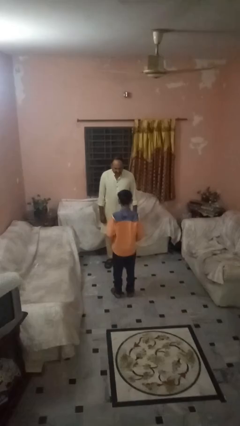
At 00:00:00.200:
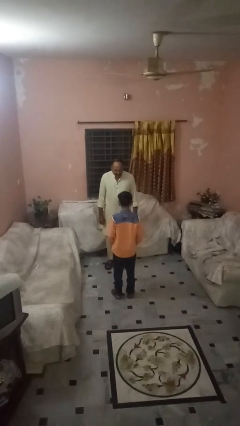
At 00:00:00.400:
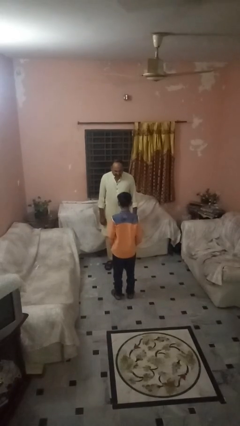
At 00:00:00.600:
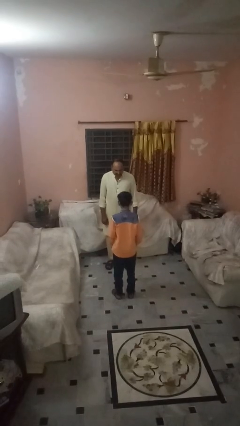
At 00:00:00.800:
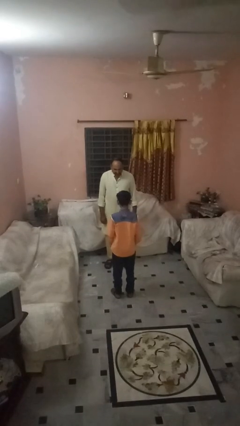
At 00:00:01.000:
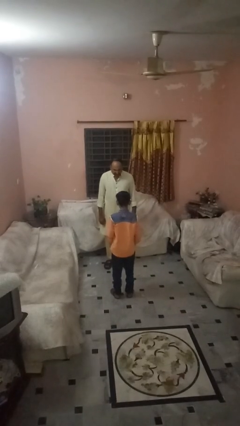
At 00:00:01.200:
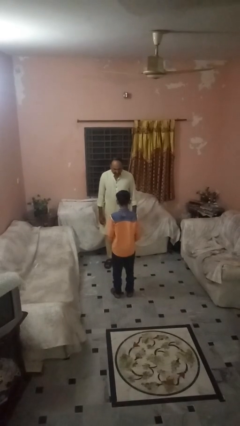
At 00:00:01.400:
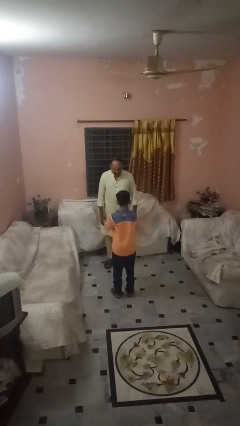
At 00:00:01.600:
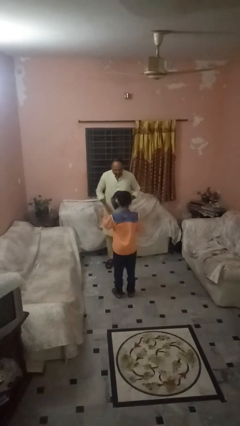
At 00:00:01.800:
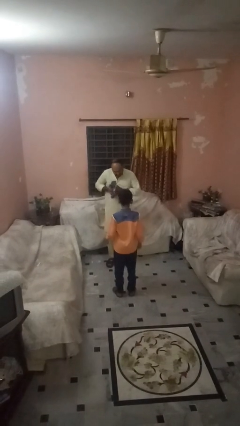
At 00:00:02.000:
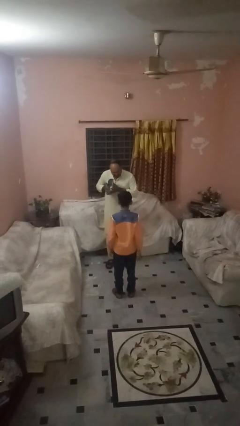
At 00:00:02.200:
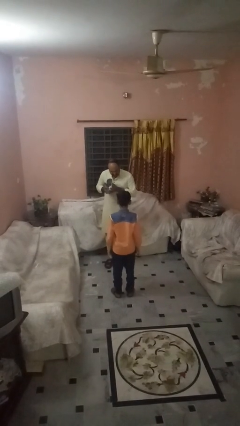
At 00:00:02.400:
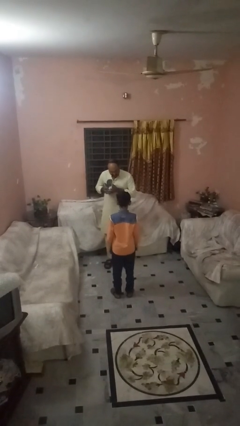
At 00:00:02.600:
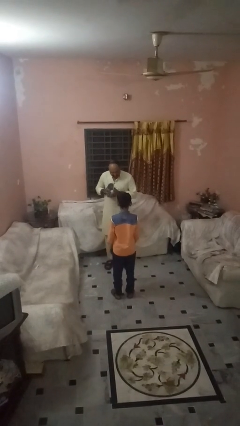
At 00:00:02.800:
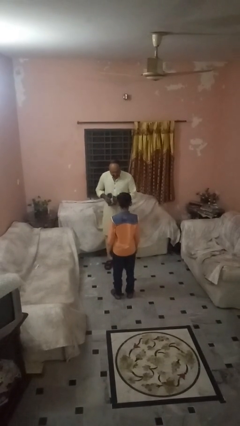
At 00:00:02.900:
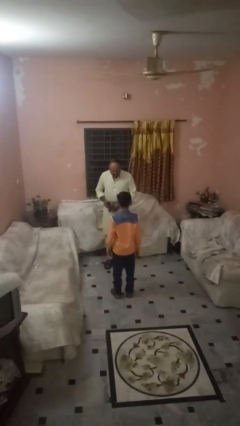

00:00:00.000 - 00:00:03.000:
person catches object from person

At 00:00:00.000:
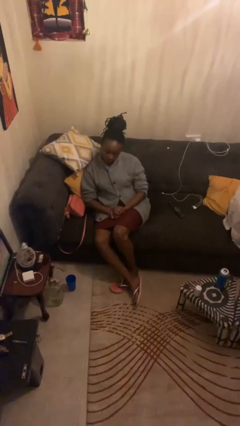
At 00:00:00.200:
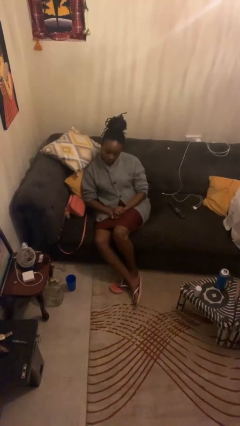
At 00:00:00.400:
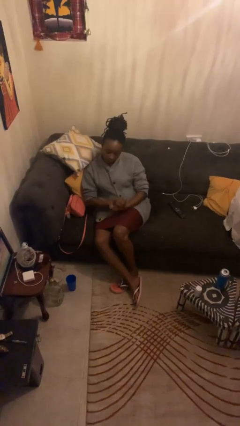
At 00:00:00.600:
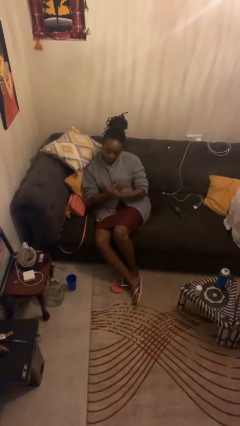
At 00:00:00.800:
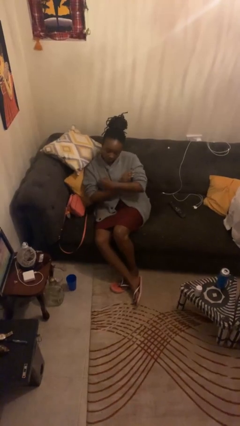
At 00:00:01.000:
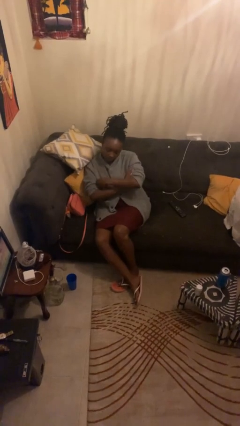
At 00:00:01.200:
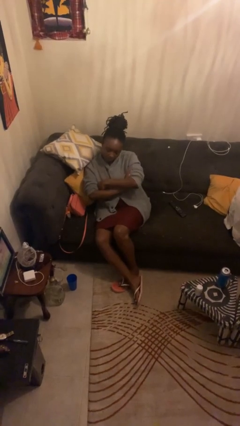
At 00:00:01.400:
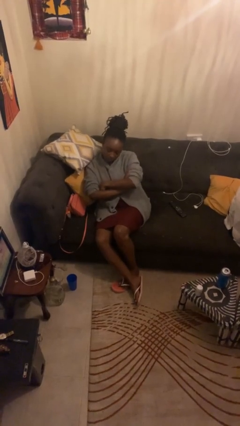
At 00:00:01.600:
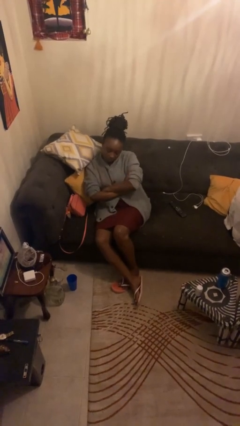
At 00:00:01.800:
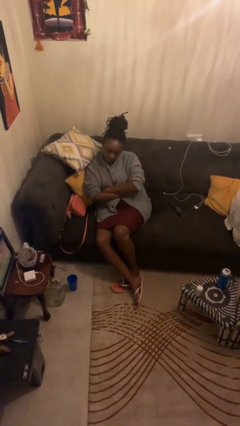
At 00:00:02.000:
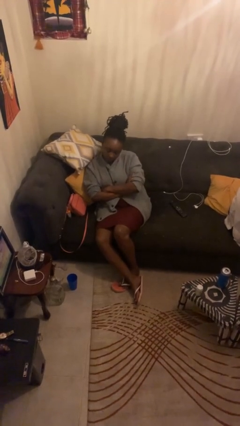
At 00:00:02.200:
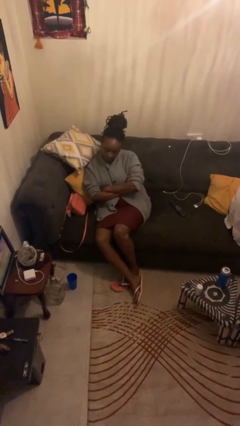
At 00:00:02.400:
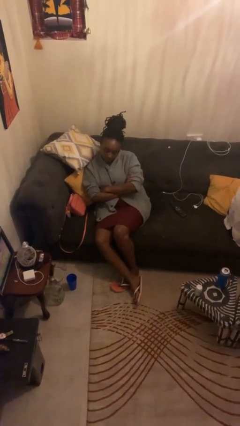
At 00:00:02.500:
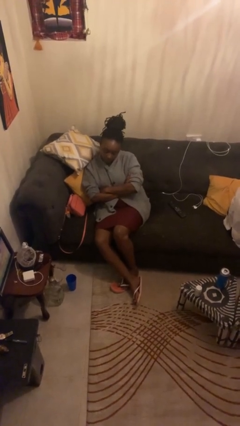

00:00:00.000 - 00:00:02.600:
person crosses arms

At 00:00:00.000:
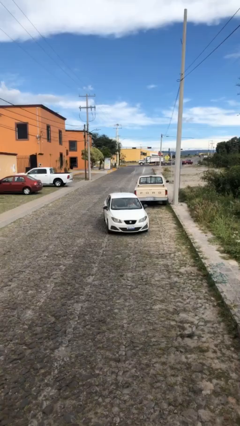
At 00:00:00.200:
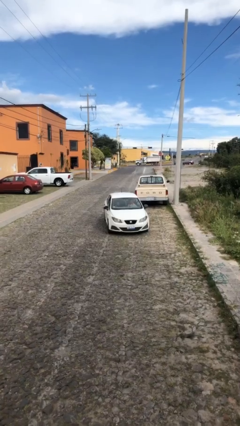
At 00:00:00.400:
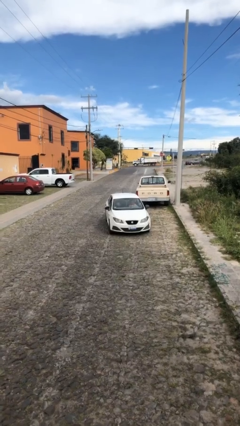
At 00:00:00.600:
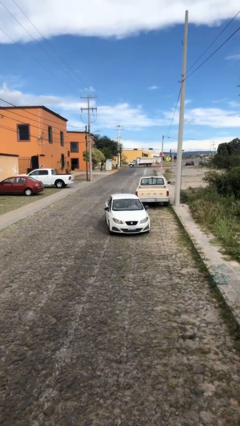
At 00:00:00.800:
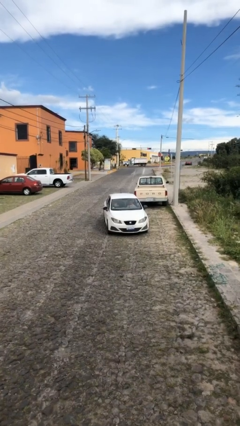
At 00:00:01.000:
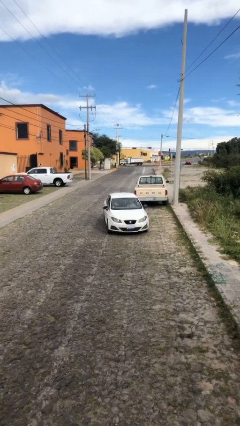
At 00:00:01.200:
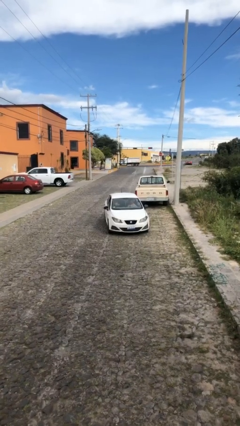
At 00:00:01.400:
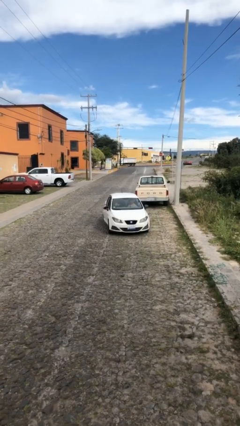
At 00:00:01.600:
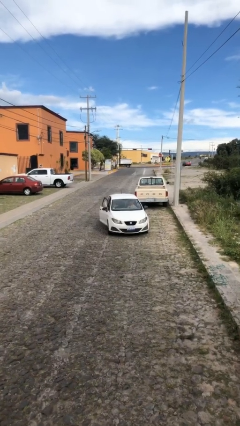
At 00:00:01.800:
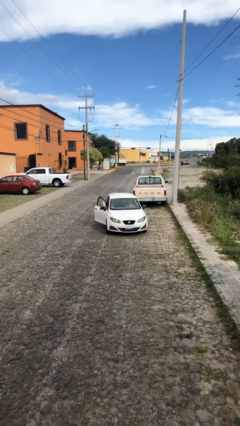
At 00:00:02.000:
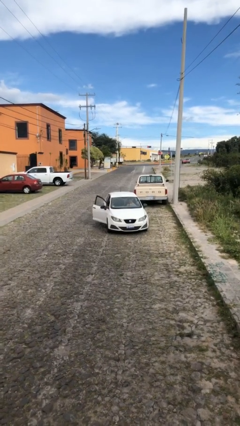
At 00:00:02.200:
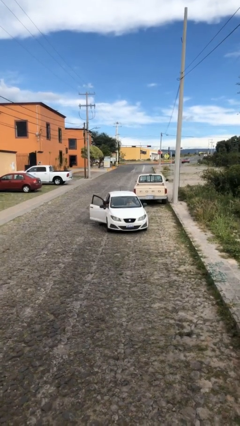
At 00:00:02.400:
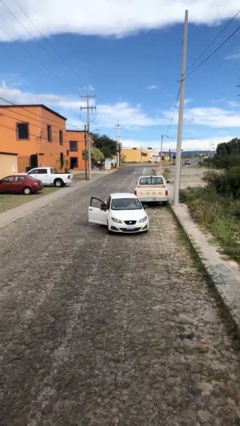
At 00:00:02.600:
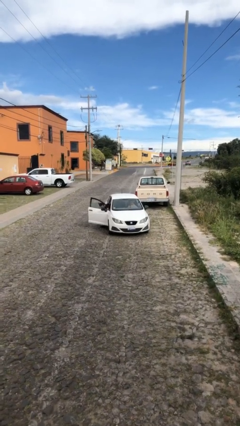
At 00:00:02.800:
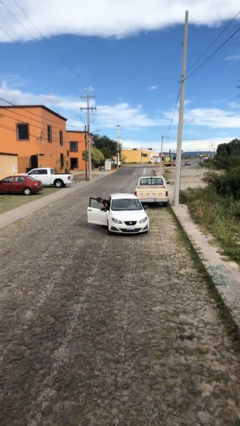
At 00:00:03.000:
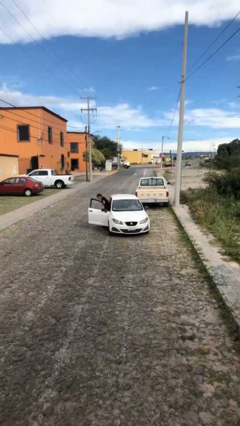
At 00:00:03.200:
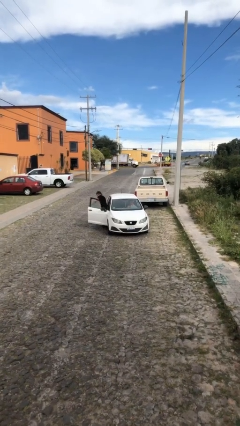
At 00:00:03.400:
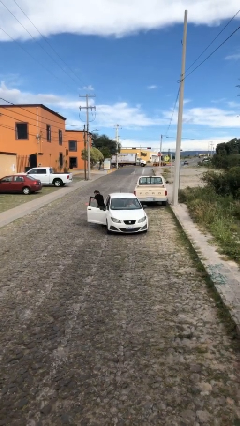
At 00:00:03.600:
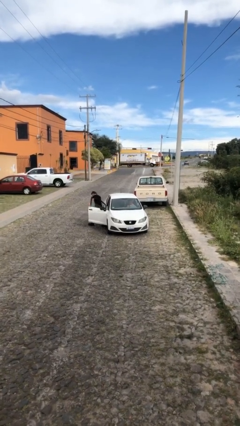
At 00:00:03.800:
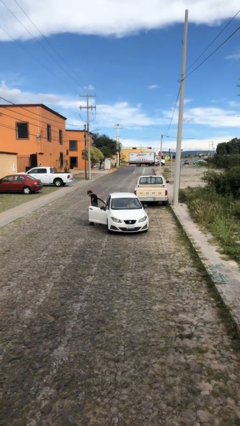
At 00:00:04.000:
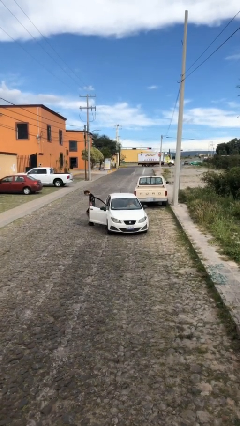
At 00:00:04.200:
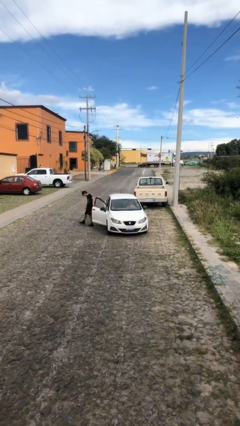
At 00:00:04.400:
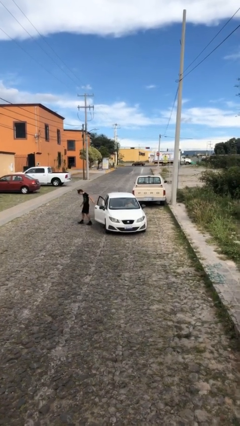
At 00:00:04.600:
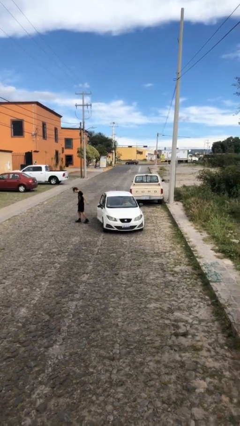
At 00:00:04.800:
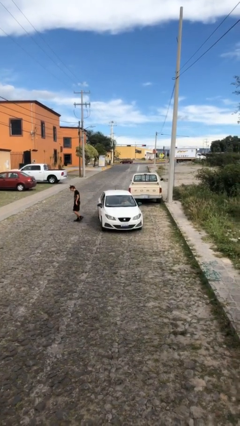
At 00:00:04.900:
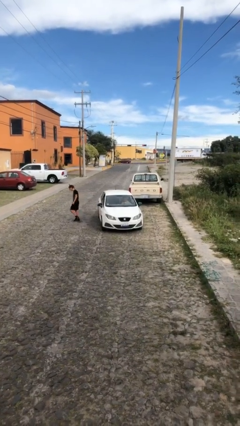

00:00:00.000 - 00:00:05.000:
car drops off person

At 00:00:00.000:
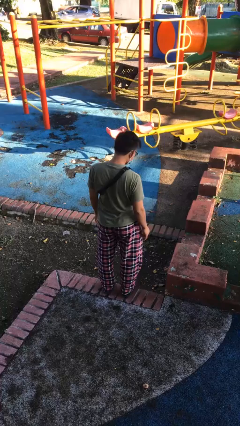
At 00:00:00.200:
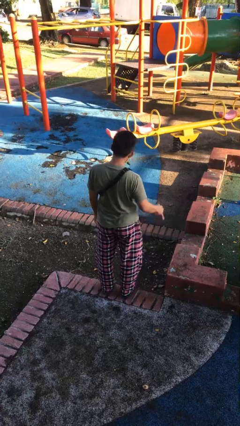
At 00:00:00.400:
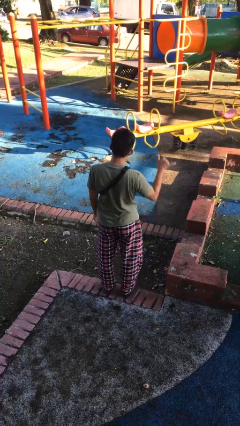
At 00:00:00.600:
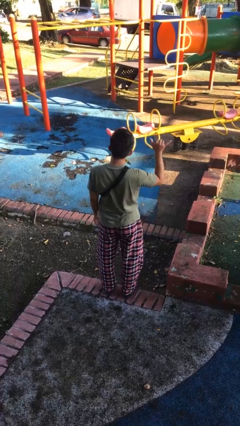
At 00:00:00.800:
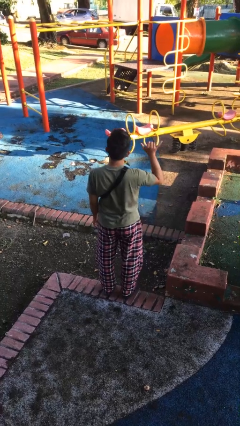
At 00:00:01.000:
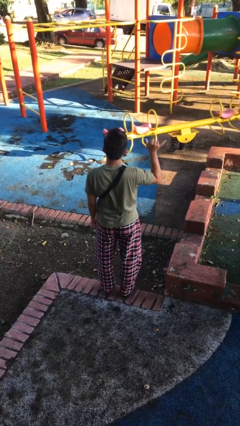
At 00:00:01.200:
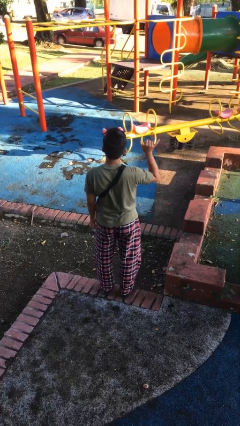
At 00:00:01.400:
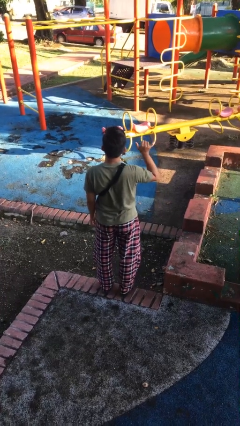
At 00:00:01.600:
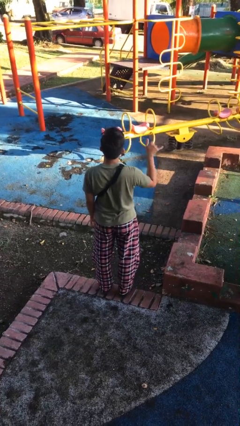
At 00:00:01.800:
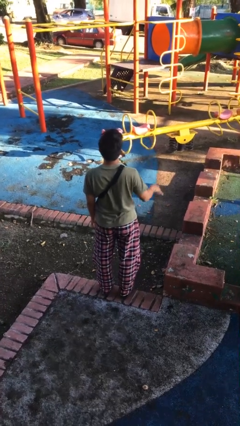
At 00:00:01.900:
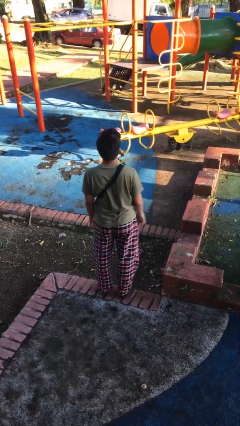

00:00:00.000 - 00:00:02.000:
person gestures hang loose

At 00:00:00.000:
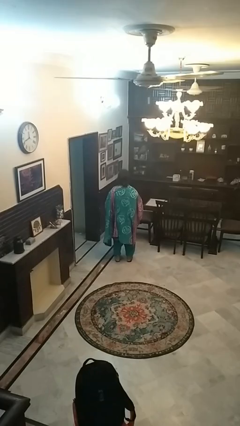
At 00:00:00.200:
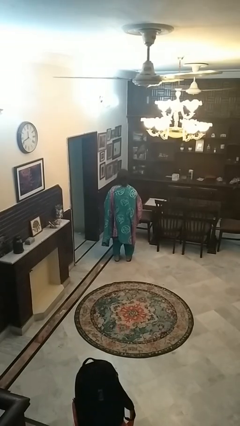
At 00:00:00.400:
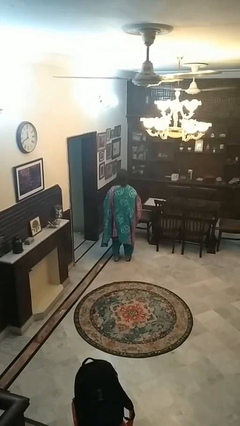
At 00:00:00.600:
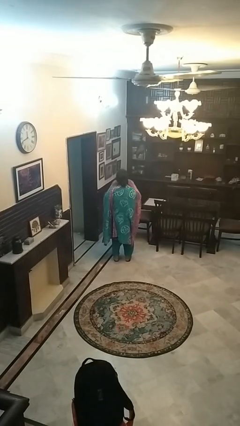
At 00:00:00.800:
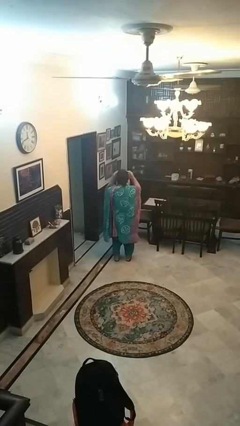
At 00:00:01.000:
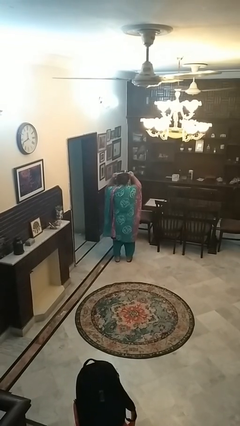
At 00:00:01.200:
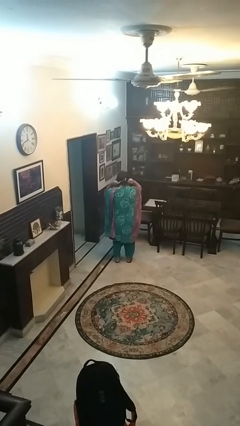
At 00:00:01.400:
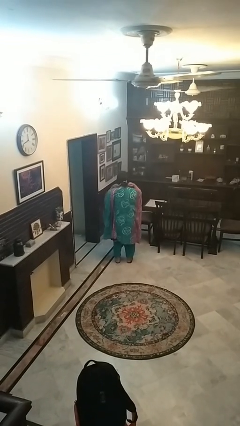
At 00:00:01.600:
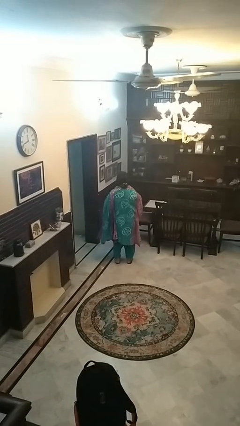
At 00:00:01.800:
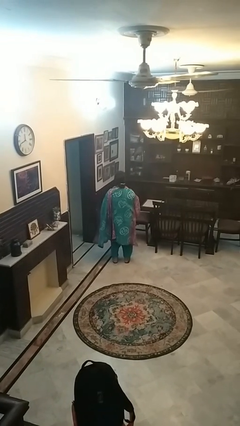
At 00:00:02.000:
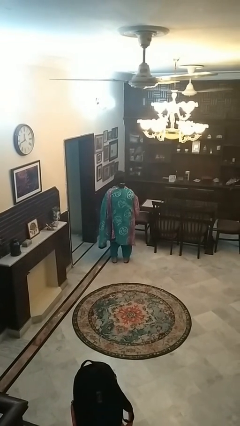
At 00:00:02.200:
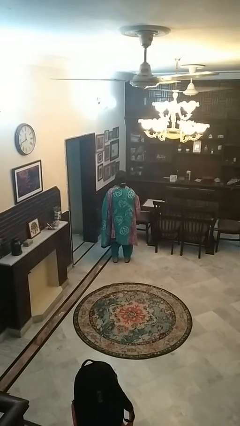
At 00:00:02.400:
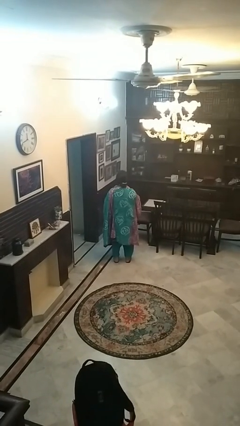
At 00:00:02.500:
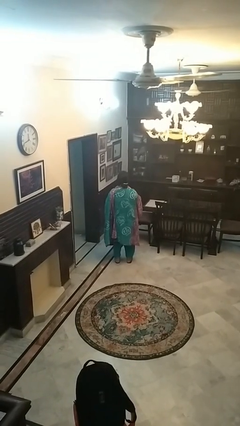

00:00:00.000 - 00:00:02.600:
person puts on apron

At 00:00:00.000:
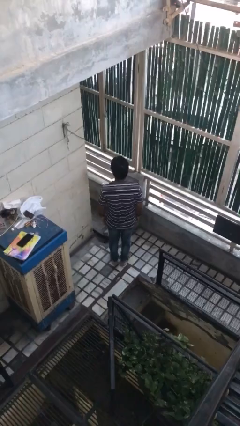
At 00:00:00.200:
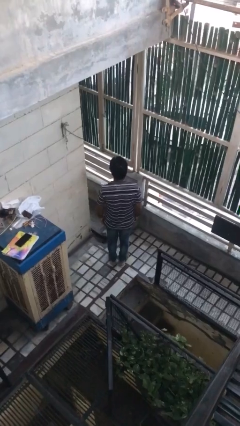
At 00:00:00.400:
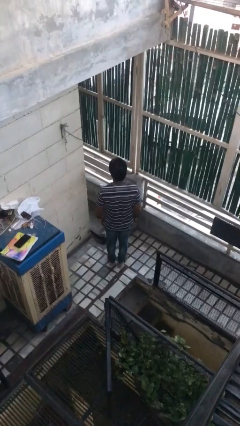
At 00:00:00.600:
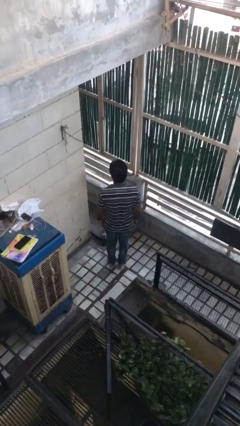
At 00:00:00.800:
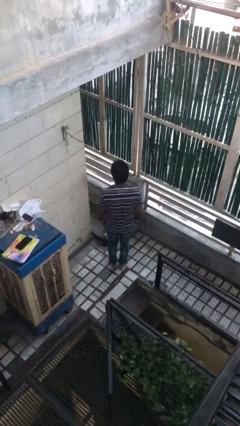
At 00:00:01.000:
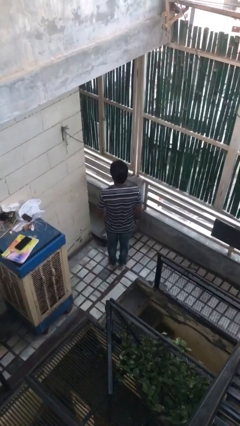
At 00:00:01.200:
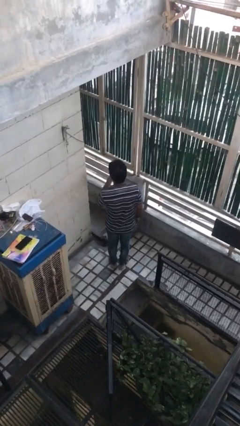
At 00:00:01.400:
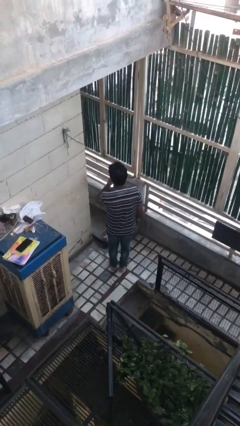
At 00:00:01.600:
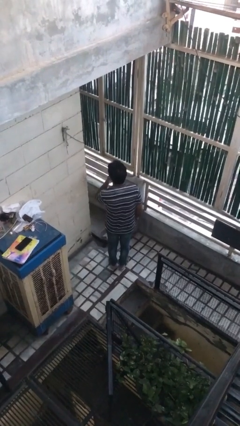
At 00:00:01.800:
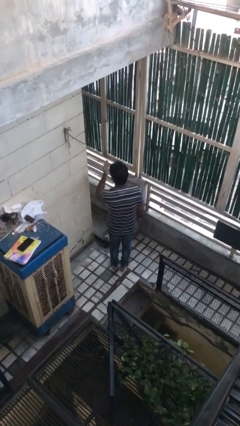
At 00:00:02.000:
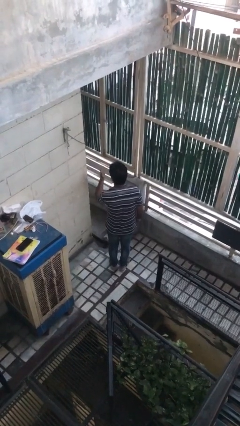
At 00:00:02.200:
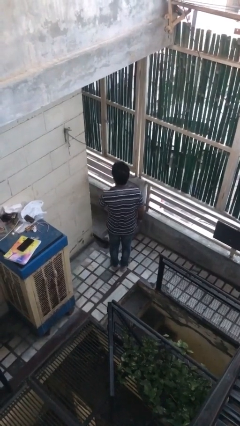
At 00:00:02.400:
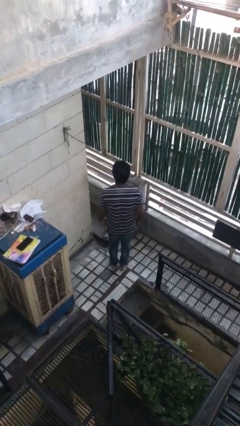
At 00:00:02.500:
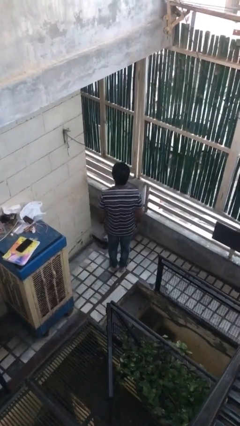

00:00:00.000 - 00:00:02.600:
person gestures blow kiss
